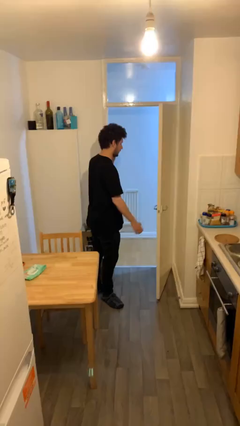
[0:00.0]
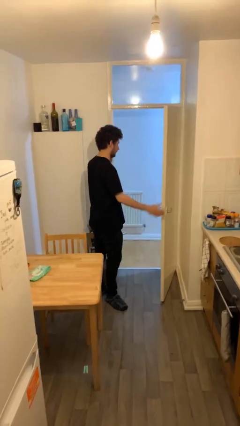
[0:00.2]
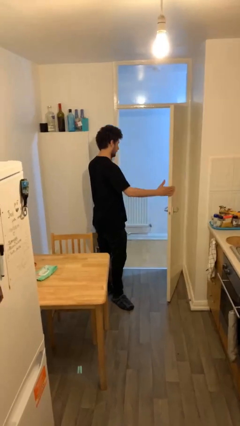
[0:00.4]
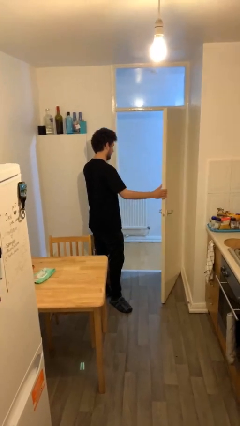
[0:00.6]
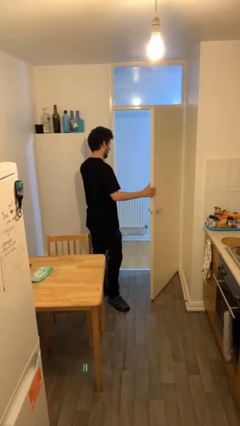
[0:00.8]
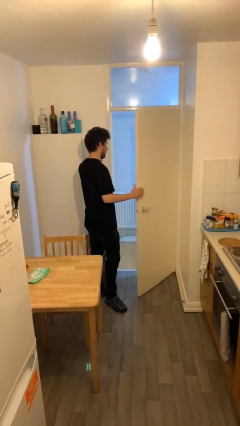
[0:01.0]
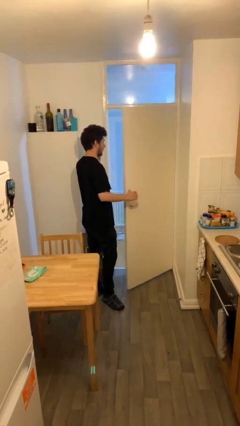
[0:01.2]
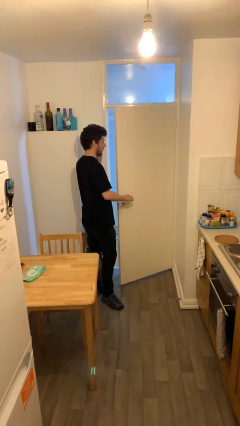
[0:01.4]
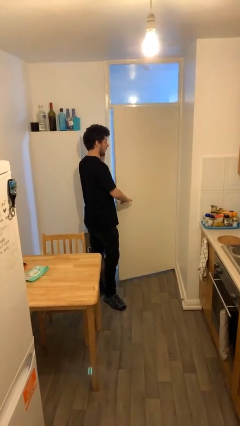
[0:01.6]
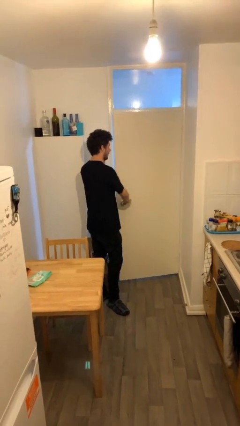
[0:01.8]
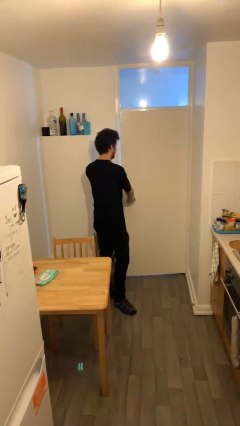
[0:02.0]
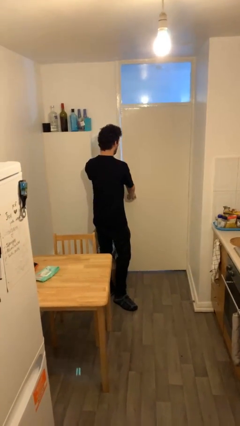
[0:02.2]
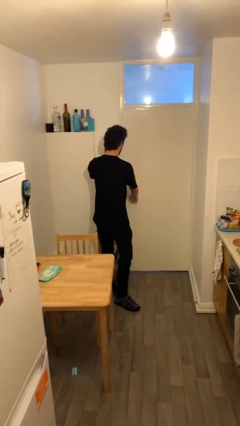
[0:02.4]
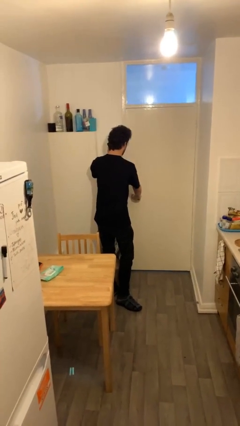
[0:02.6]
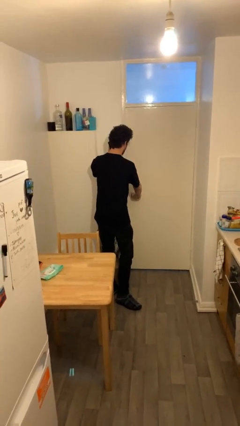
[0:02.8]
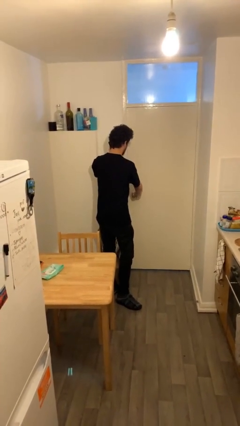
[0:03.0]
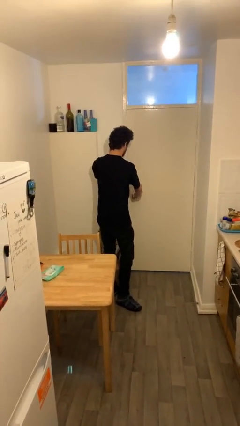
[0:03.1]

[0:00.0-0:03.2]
person closes facility door

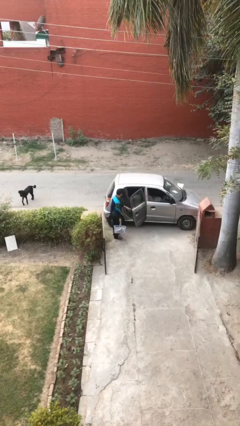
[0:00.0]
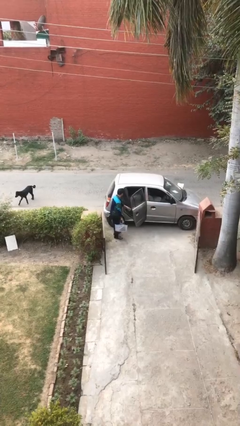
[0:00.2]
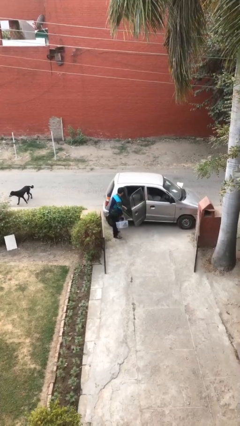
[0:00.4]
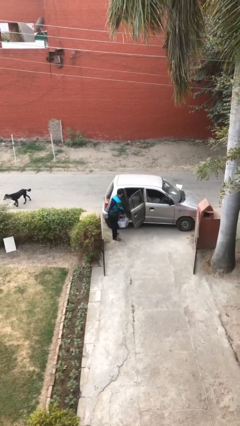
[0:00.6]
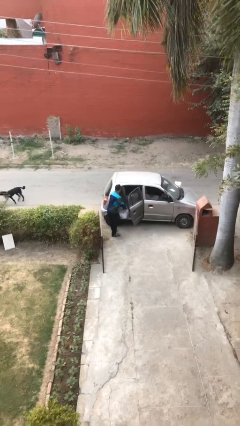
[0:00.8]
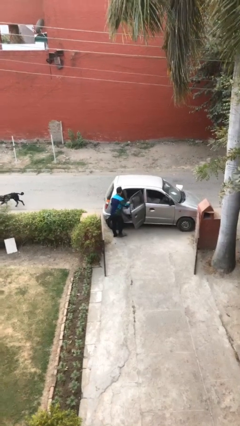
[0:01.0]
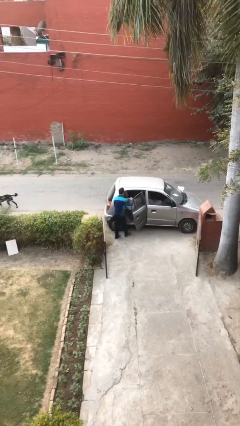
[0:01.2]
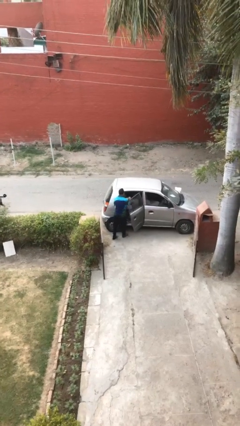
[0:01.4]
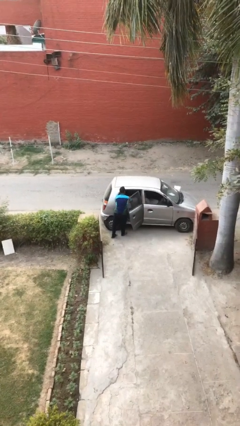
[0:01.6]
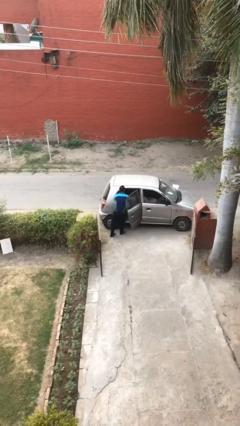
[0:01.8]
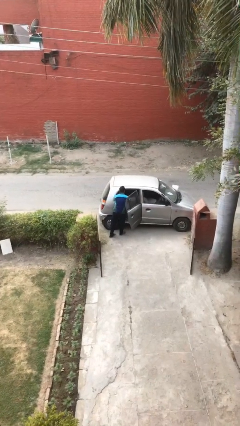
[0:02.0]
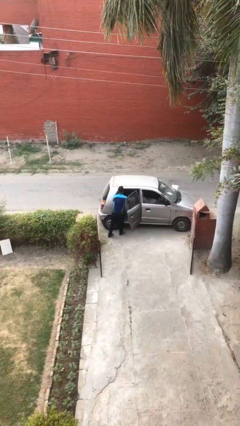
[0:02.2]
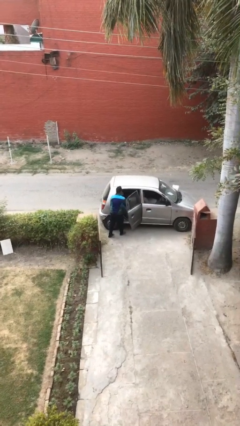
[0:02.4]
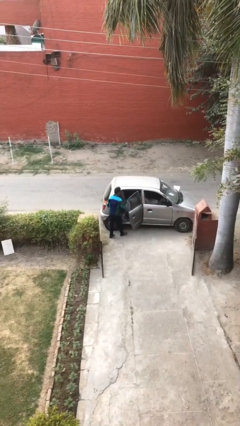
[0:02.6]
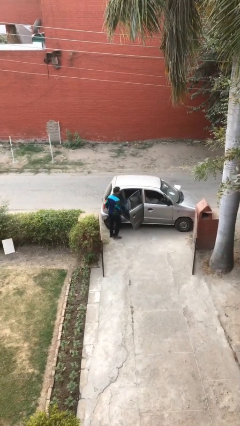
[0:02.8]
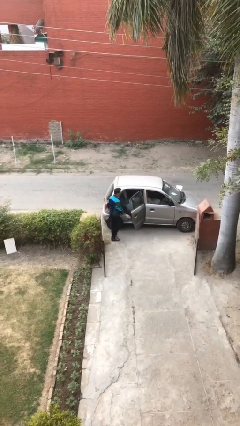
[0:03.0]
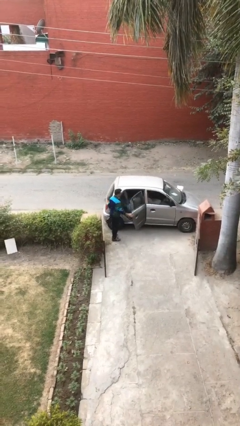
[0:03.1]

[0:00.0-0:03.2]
person loads car

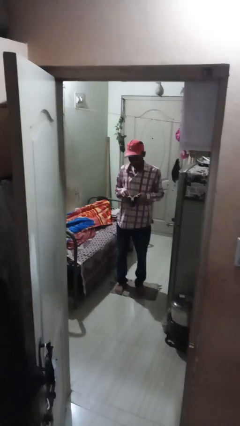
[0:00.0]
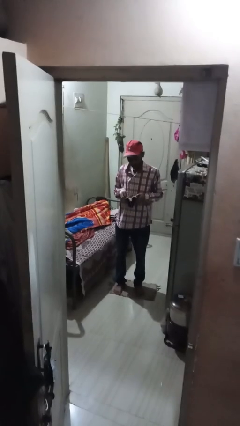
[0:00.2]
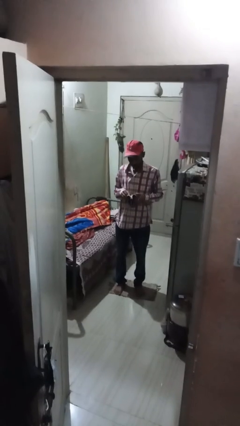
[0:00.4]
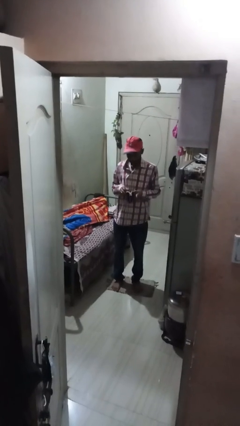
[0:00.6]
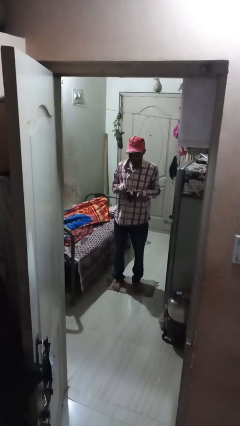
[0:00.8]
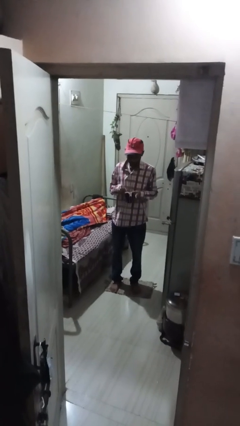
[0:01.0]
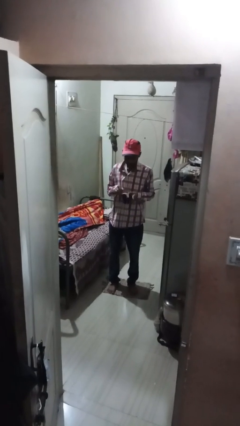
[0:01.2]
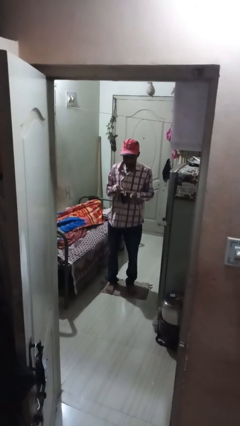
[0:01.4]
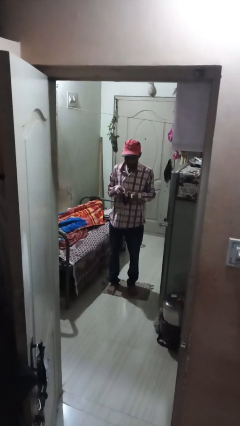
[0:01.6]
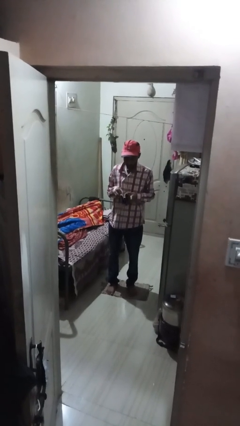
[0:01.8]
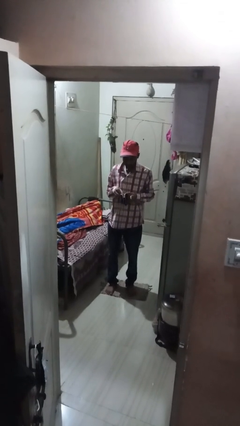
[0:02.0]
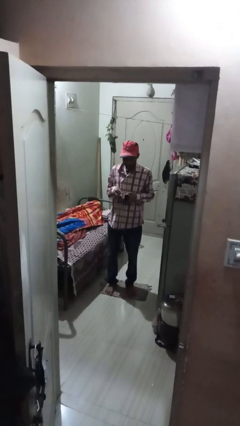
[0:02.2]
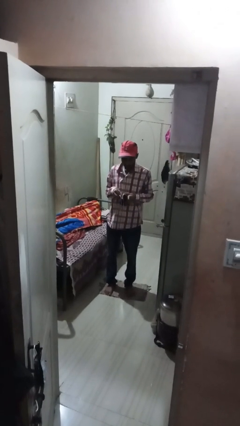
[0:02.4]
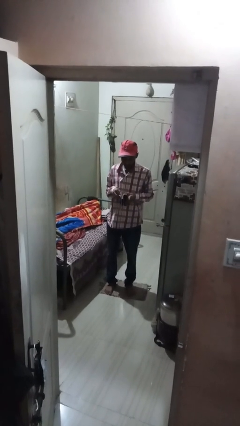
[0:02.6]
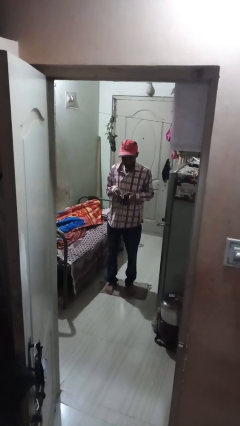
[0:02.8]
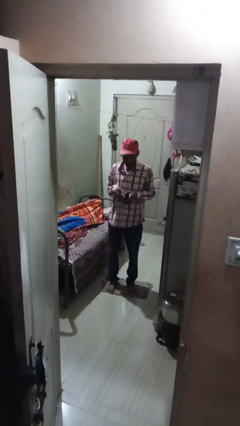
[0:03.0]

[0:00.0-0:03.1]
person searches in purse

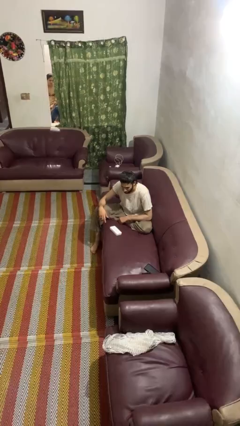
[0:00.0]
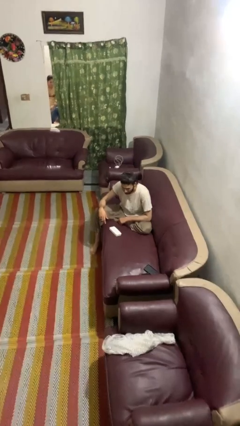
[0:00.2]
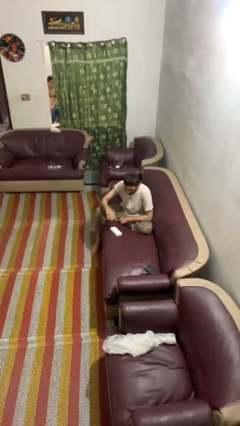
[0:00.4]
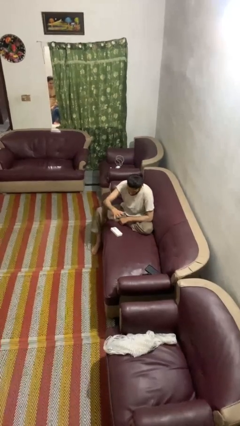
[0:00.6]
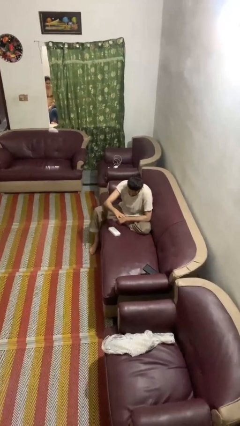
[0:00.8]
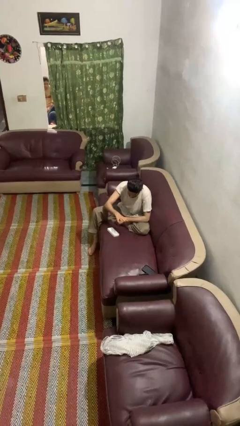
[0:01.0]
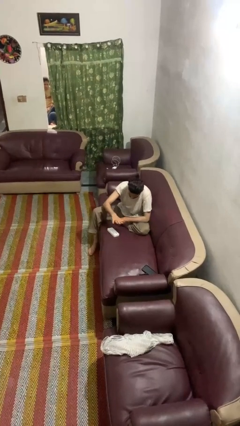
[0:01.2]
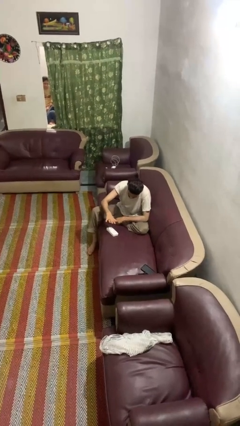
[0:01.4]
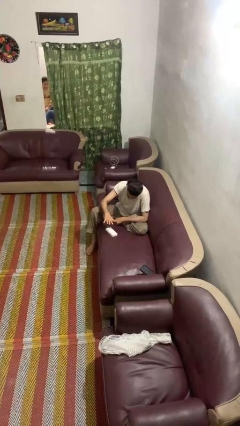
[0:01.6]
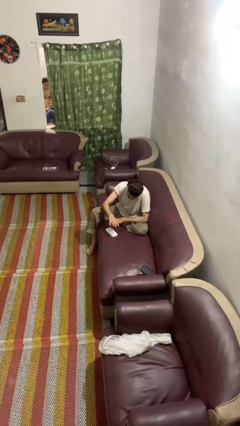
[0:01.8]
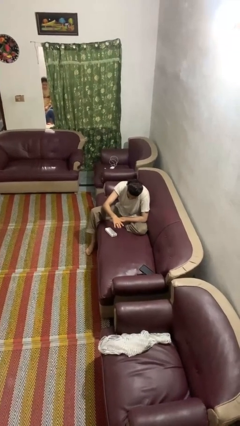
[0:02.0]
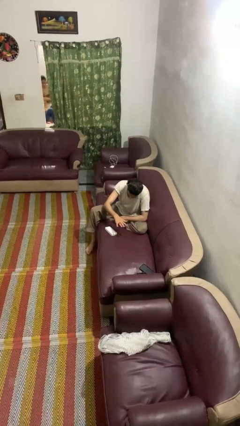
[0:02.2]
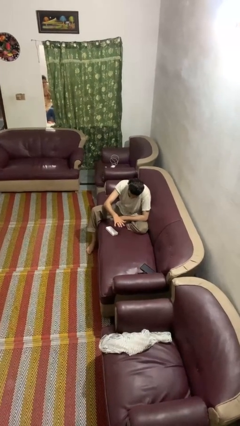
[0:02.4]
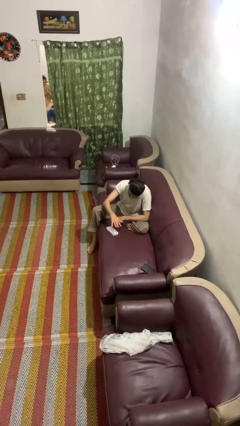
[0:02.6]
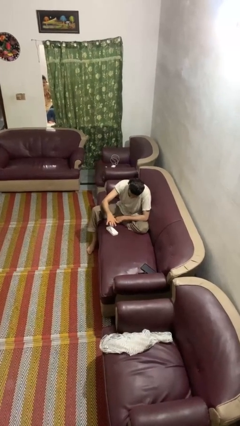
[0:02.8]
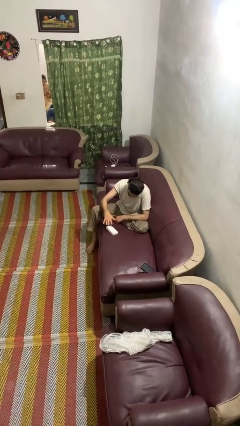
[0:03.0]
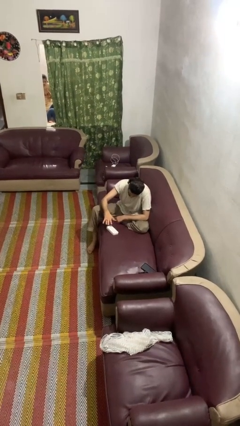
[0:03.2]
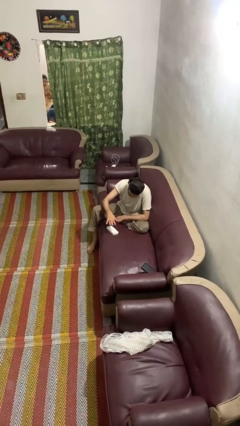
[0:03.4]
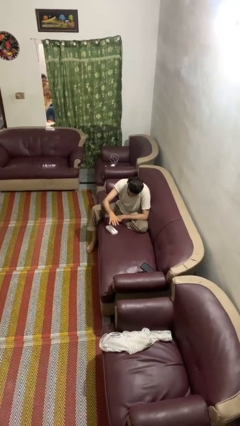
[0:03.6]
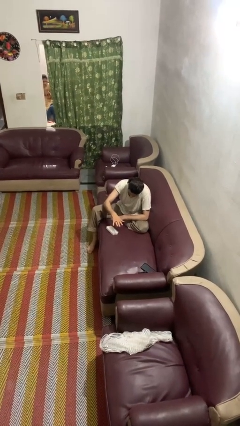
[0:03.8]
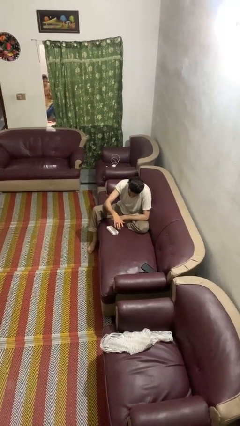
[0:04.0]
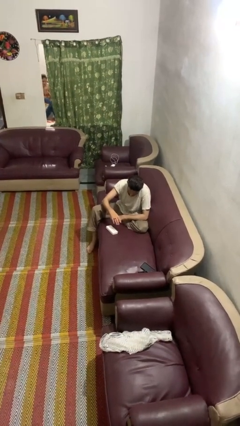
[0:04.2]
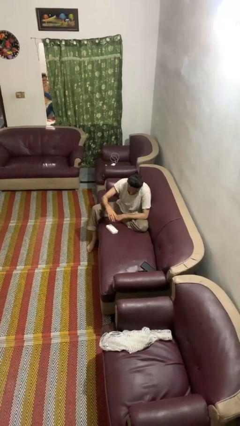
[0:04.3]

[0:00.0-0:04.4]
person waves hand over object

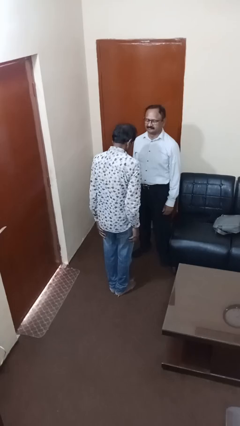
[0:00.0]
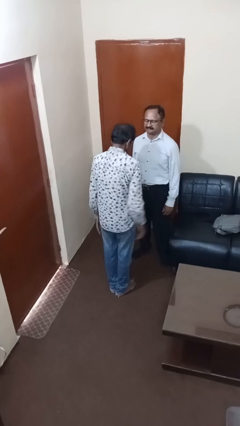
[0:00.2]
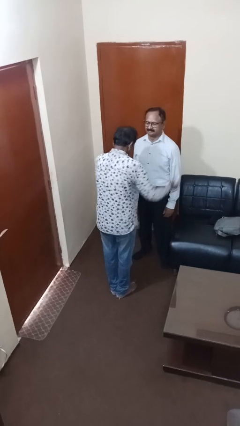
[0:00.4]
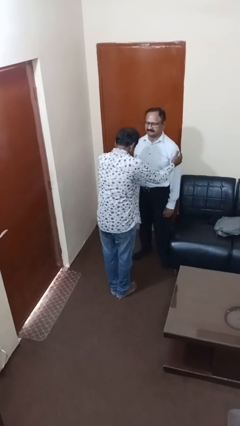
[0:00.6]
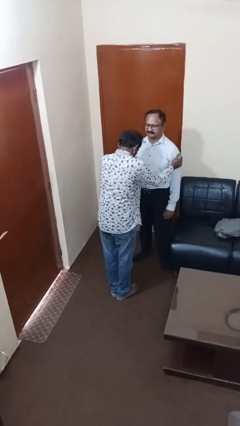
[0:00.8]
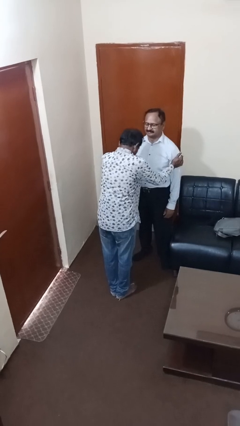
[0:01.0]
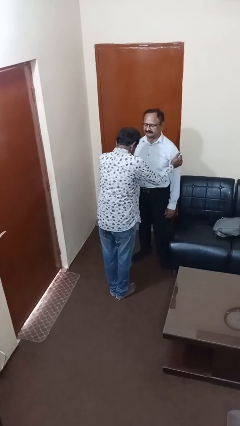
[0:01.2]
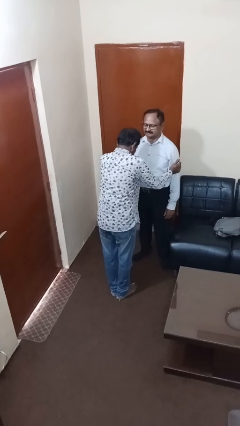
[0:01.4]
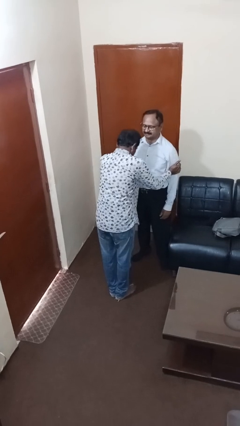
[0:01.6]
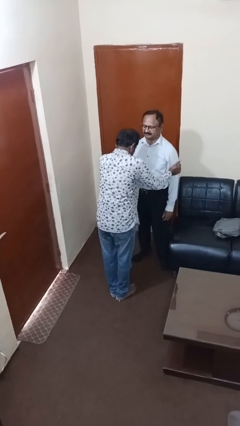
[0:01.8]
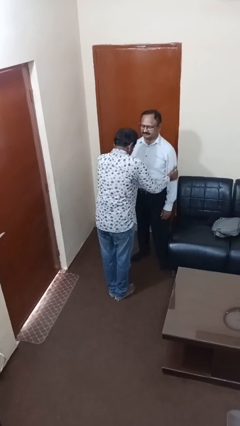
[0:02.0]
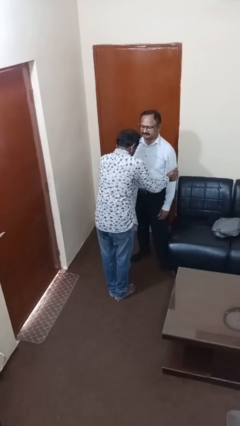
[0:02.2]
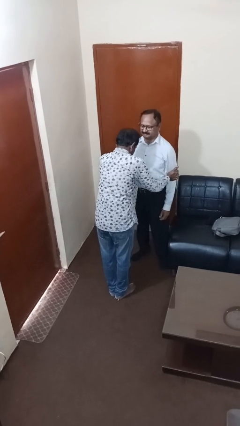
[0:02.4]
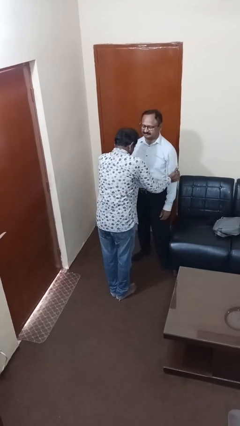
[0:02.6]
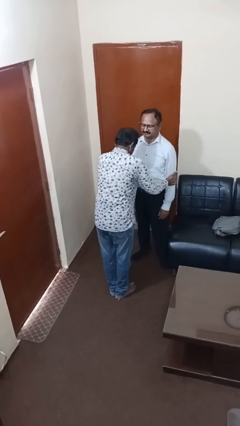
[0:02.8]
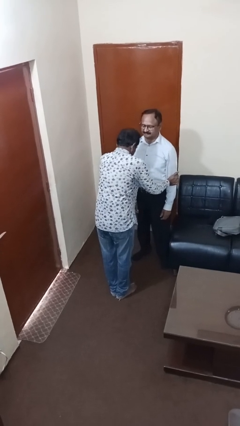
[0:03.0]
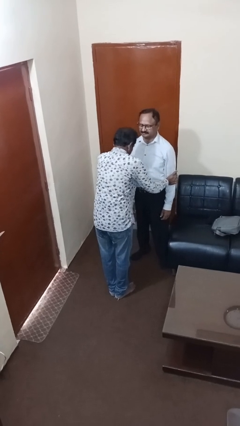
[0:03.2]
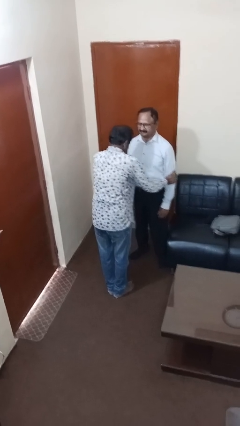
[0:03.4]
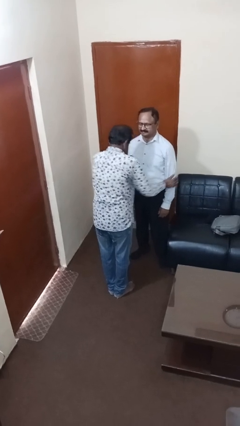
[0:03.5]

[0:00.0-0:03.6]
person grabs person by bicep
